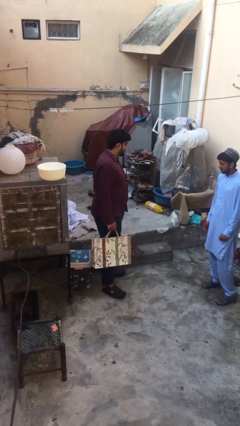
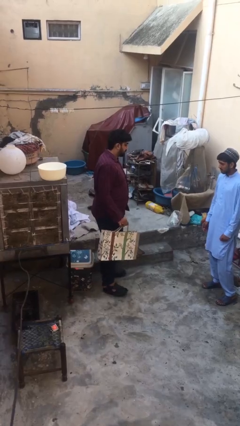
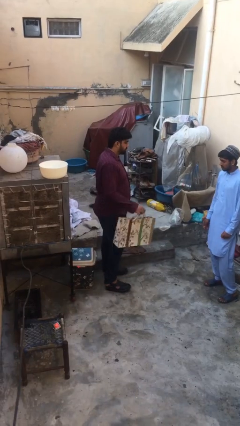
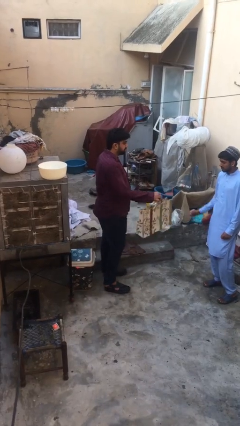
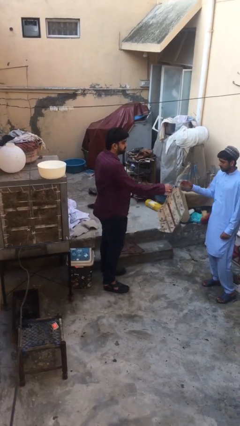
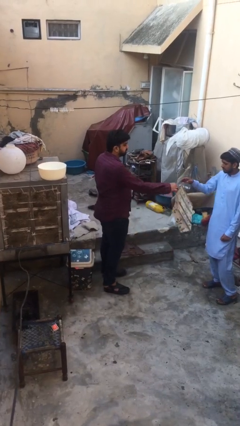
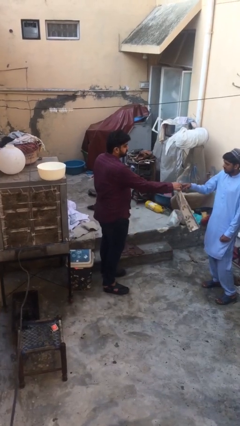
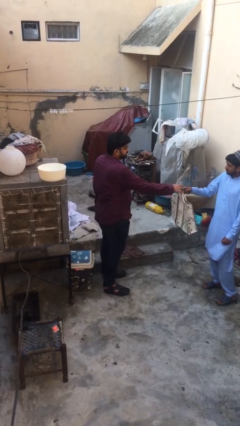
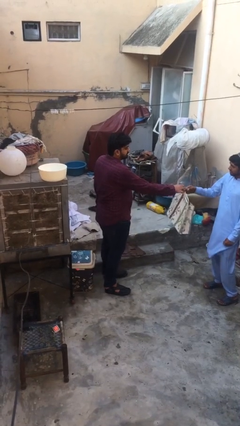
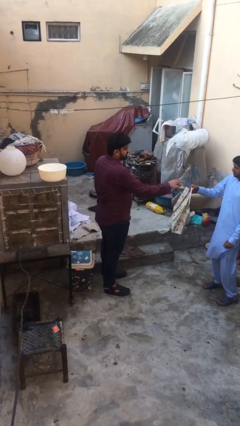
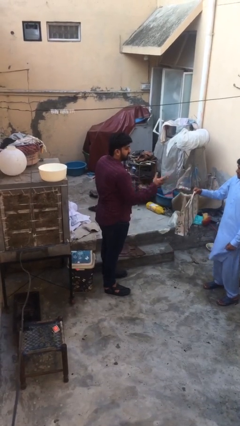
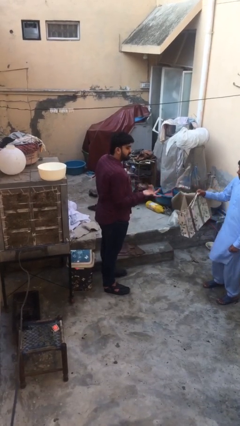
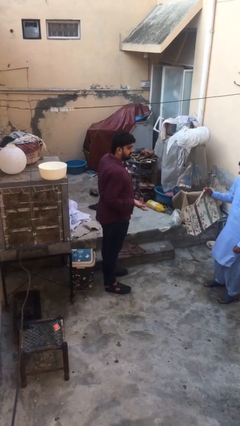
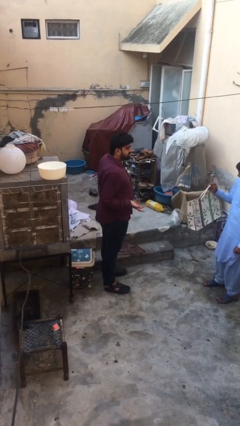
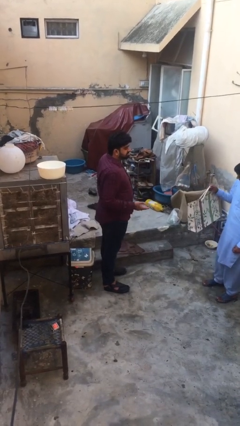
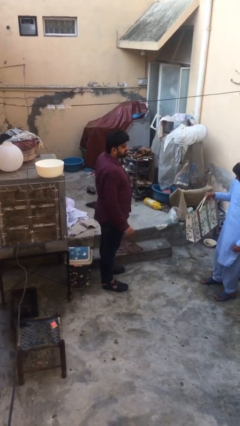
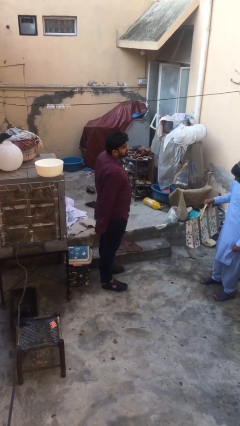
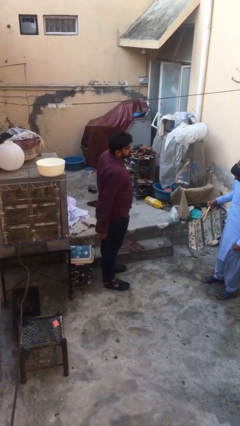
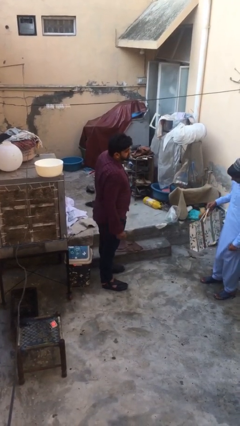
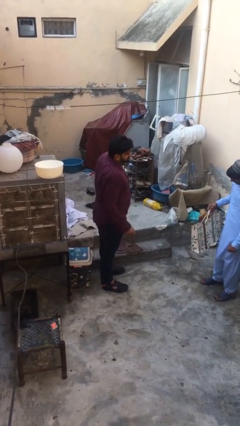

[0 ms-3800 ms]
person transfers object to person

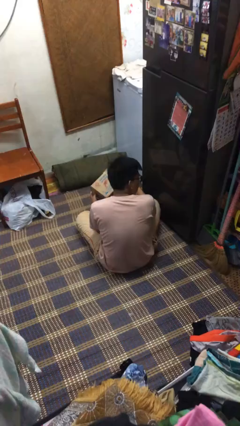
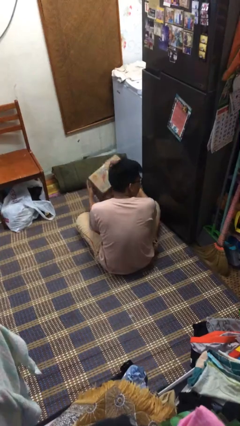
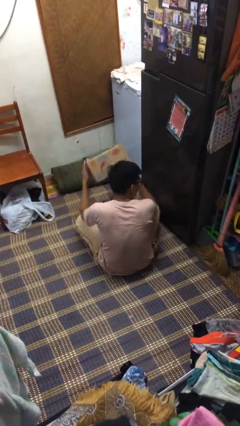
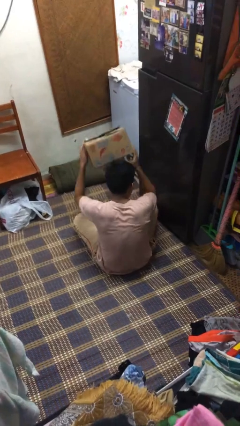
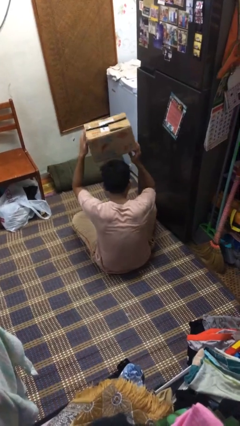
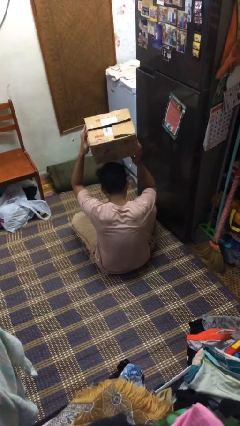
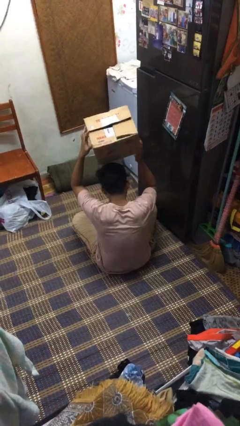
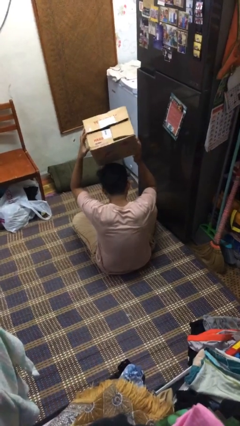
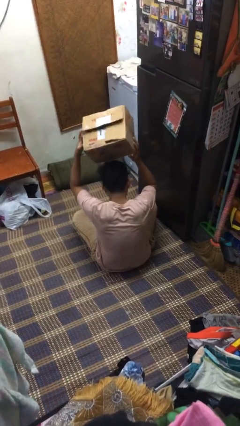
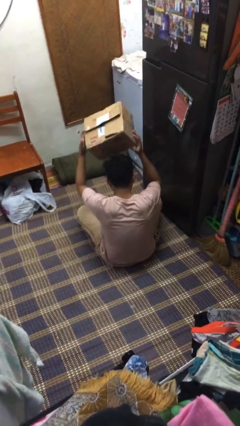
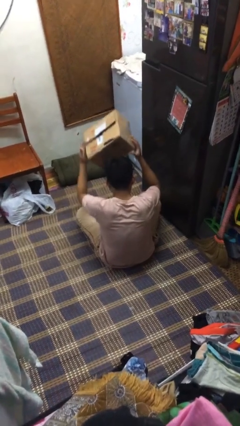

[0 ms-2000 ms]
person holds object above head

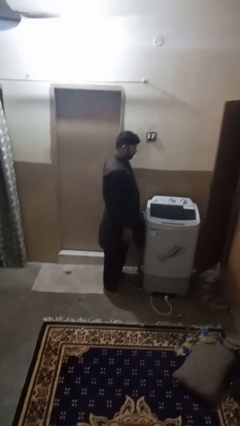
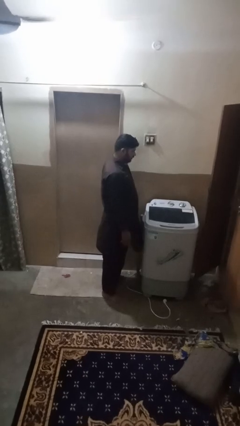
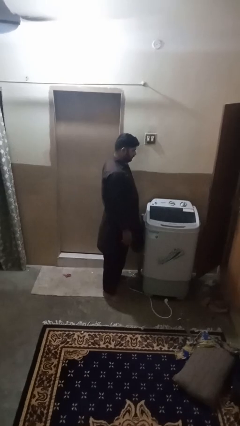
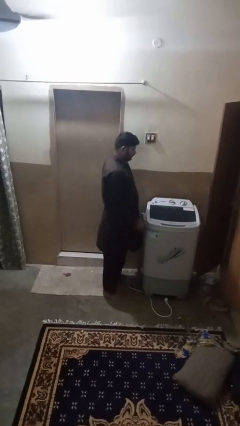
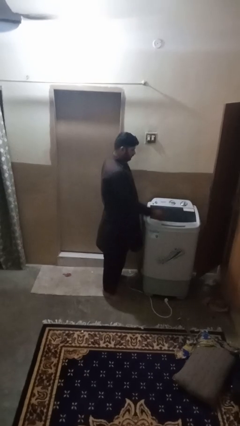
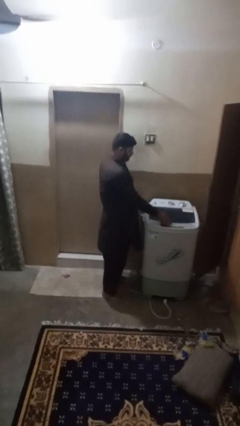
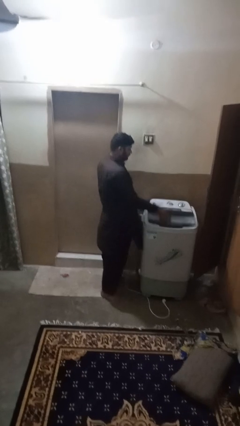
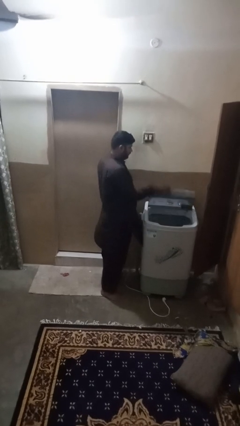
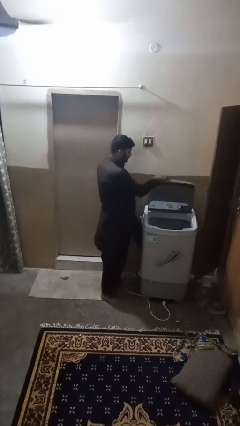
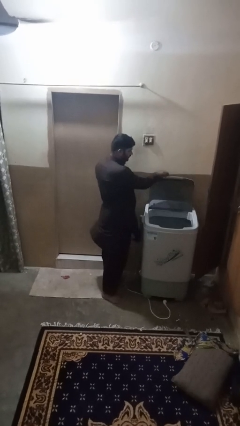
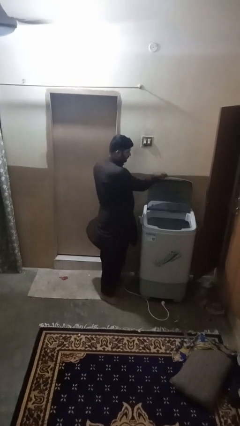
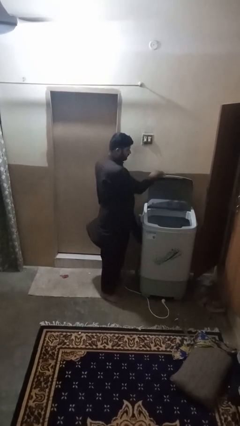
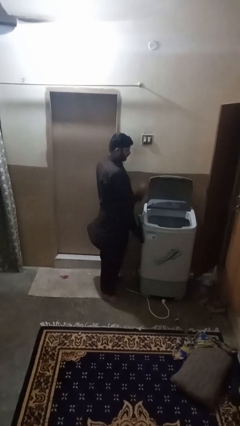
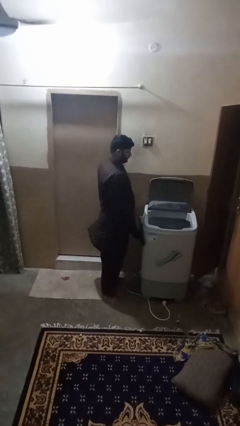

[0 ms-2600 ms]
person opens clothes washer

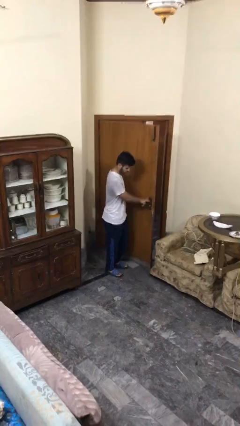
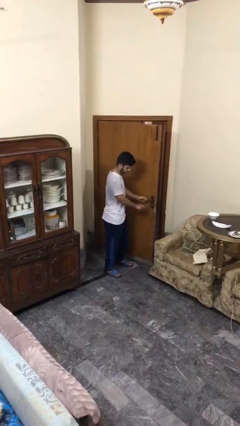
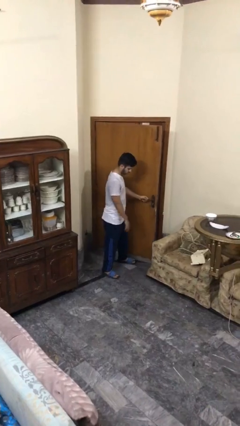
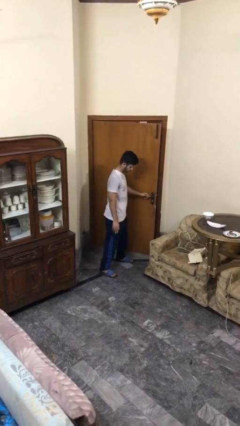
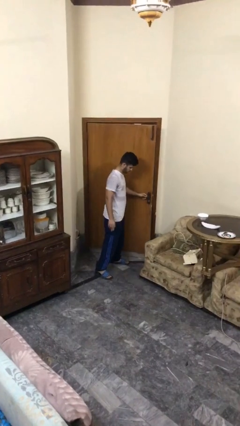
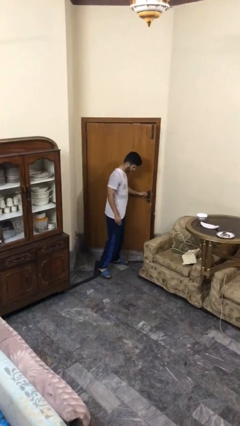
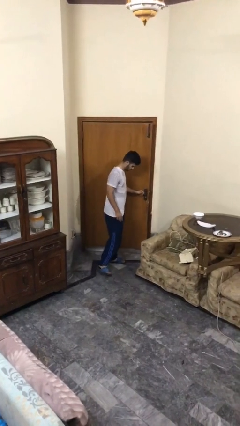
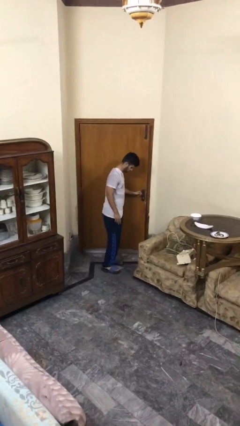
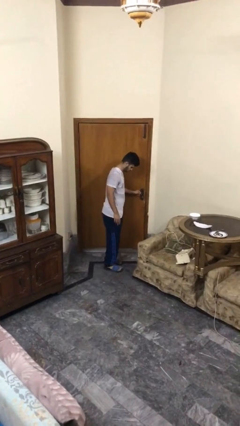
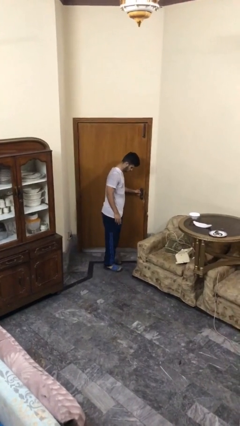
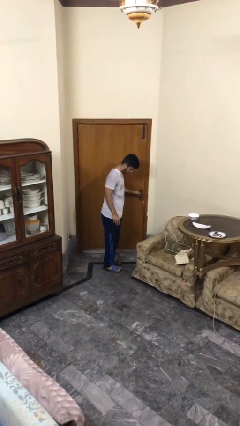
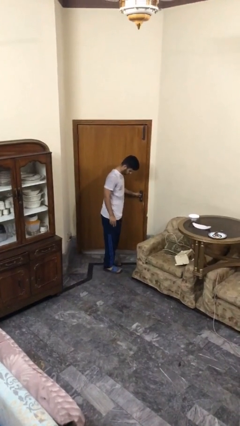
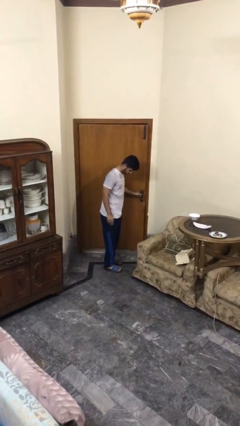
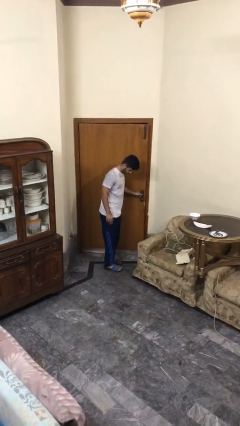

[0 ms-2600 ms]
person closes facility door

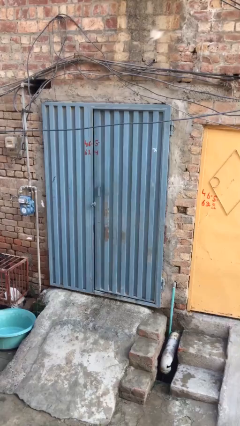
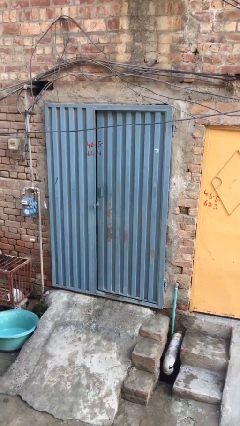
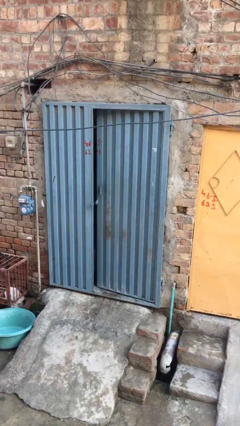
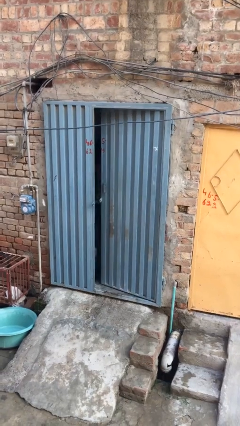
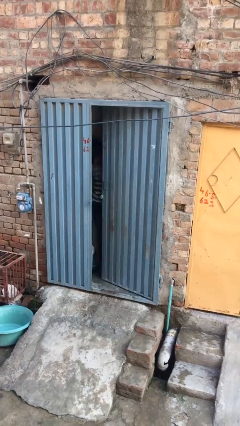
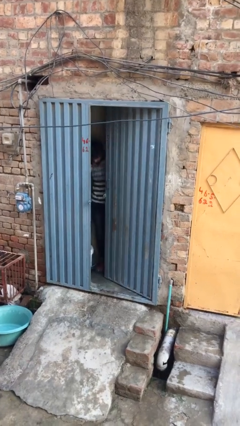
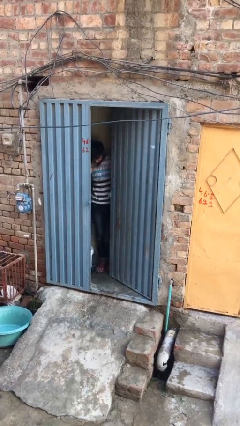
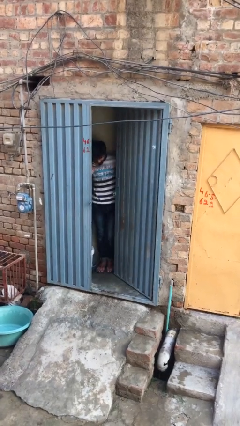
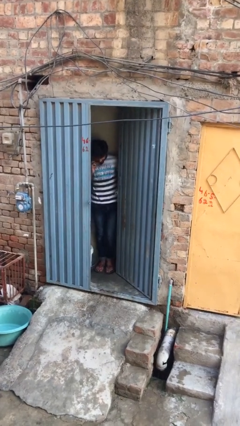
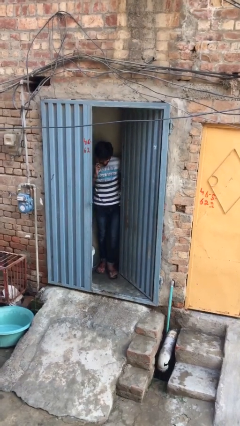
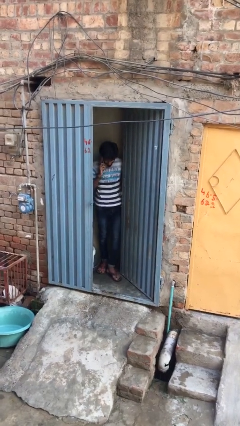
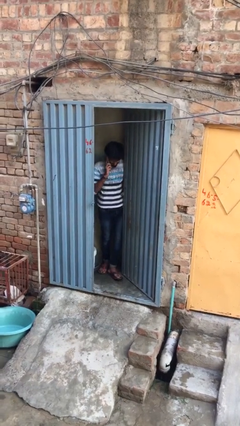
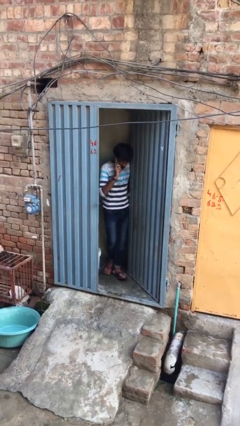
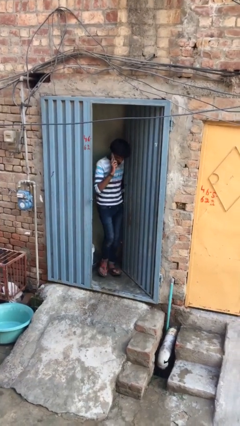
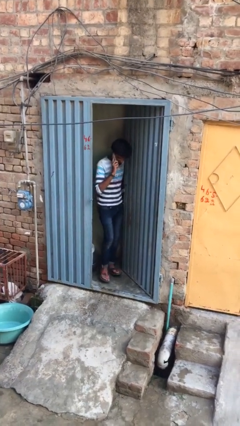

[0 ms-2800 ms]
person opens facility door

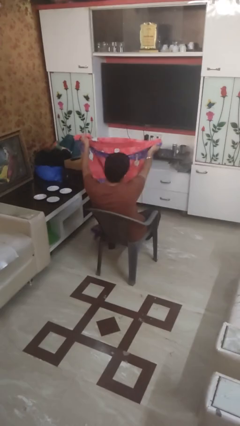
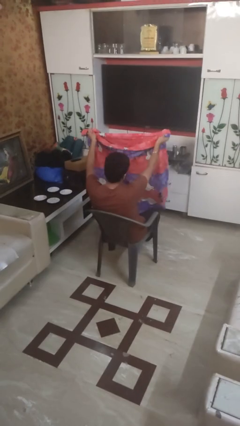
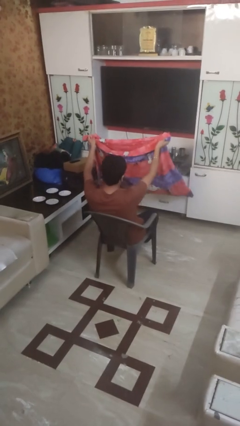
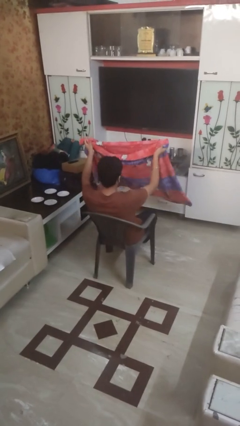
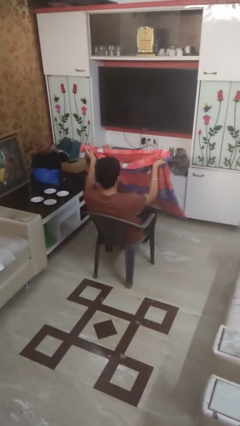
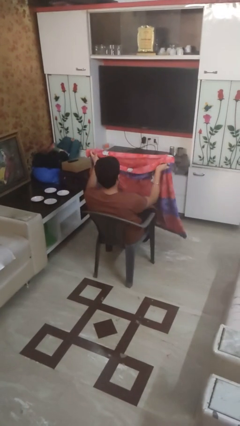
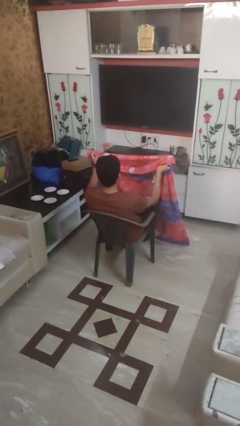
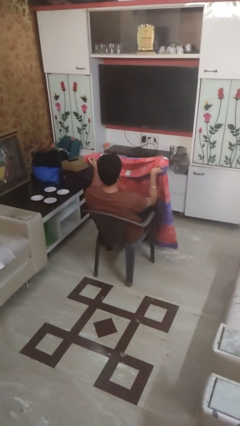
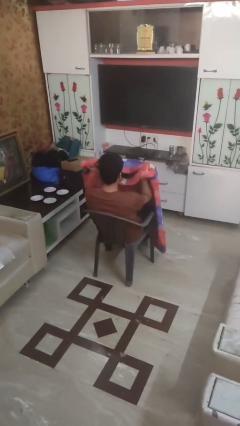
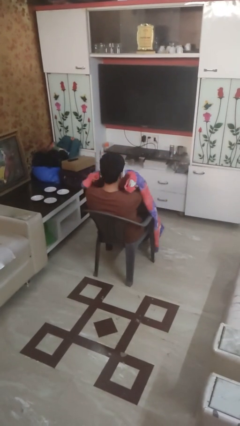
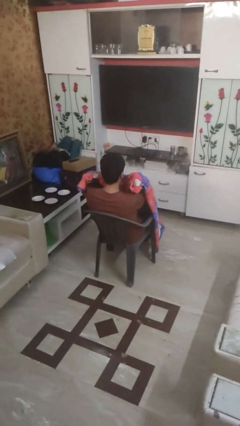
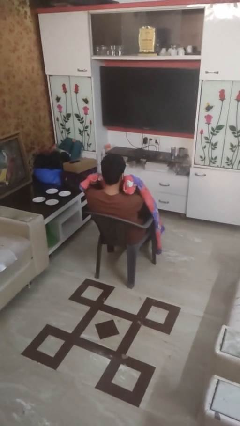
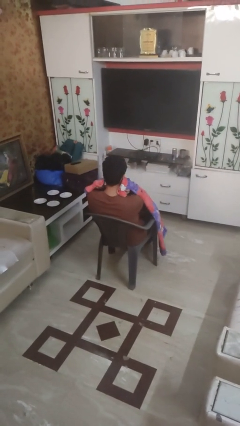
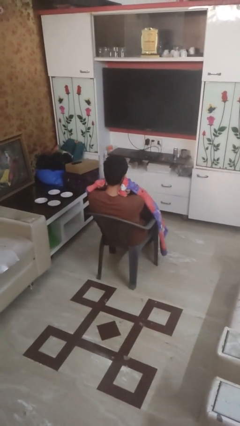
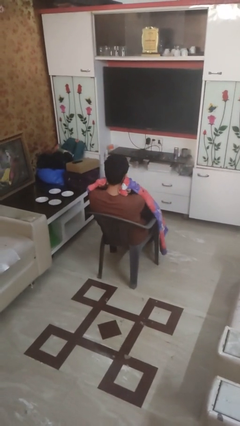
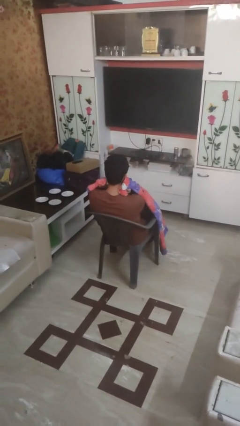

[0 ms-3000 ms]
person covers with blanket
